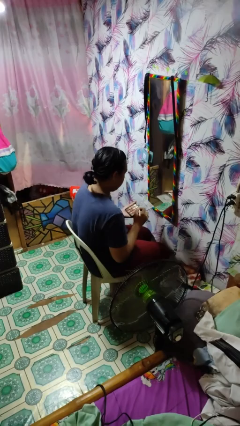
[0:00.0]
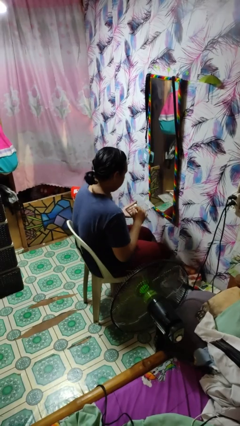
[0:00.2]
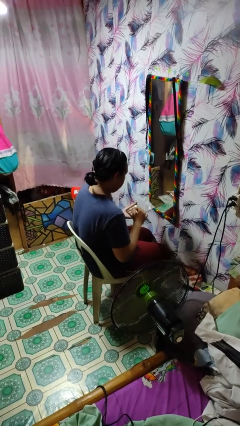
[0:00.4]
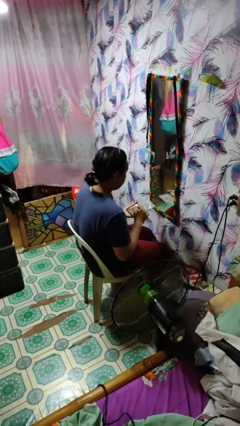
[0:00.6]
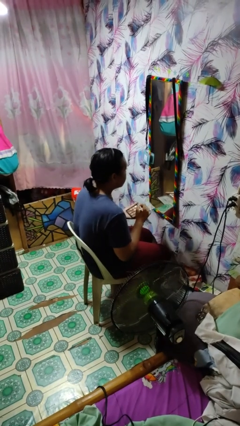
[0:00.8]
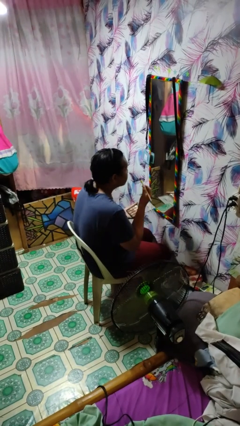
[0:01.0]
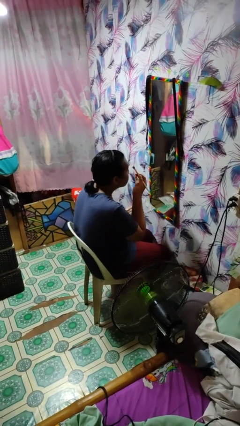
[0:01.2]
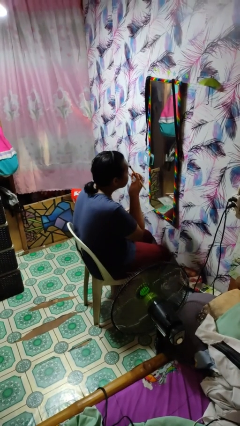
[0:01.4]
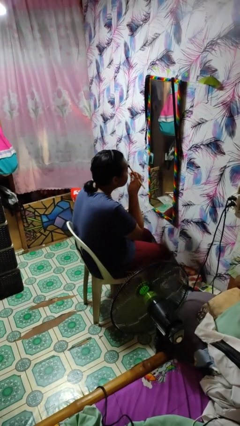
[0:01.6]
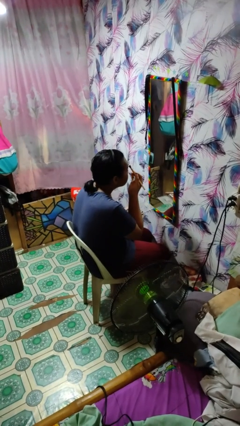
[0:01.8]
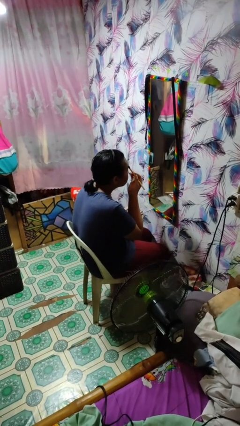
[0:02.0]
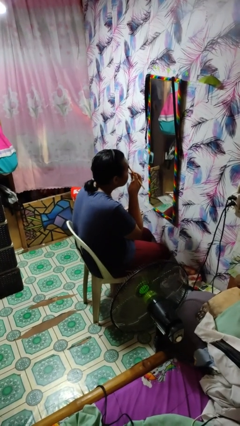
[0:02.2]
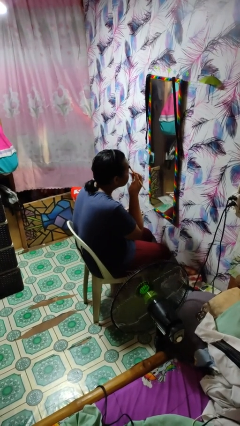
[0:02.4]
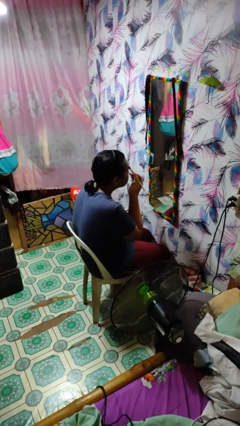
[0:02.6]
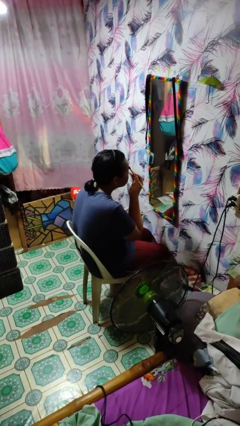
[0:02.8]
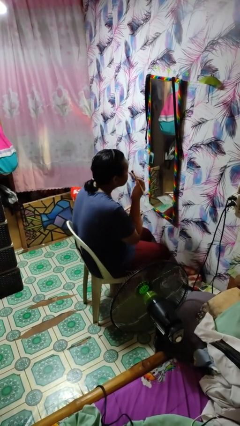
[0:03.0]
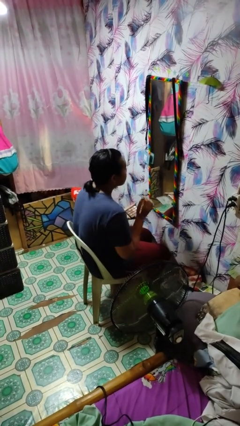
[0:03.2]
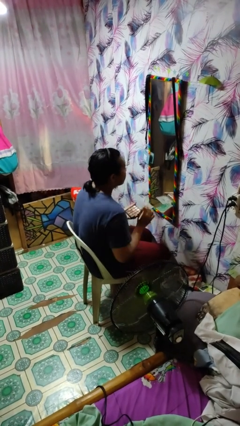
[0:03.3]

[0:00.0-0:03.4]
person applies eye makeup

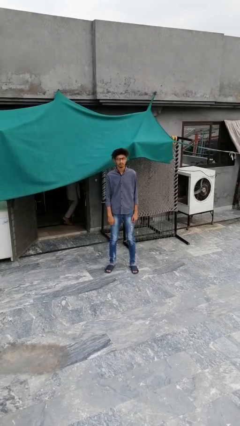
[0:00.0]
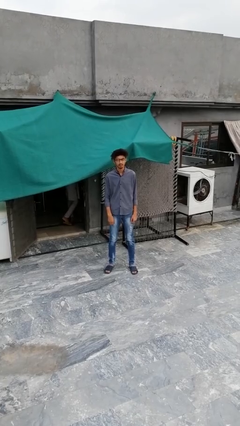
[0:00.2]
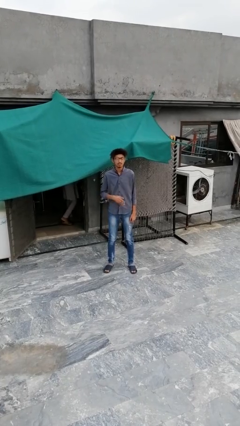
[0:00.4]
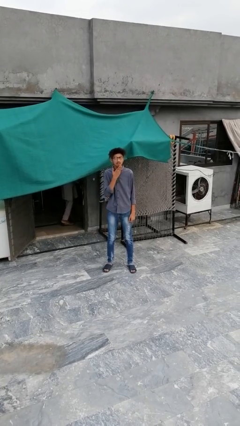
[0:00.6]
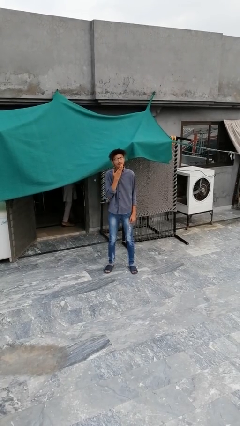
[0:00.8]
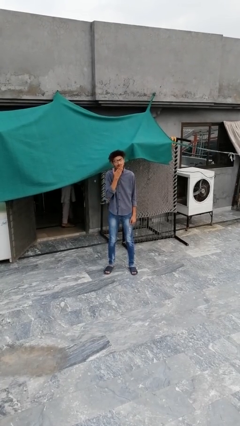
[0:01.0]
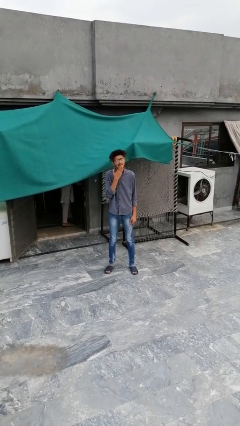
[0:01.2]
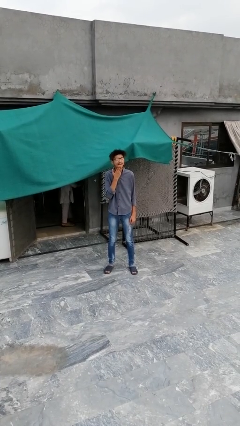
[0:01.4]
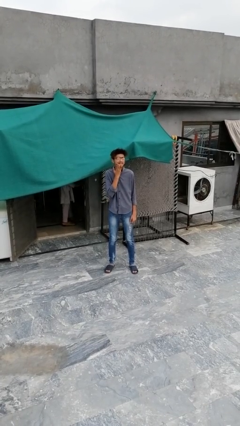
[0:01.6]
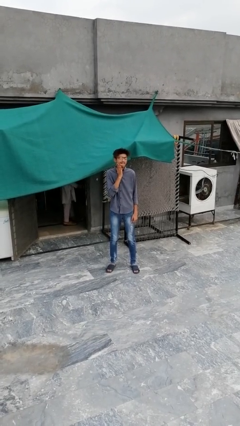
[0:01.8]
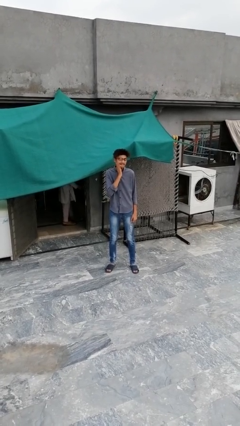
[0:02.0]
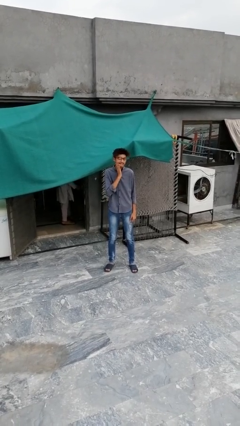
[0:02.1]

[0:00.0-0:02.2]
person strokes chin

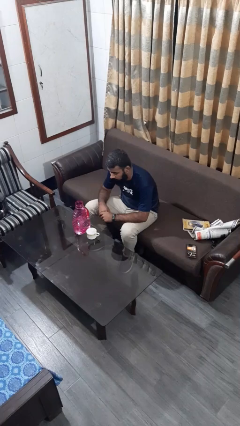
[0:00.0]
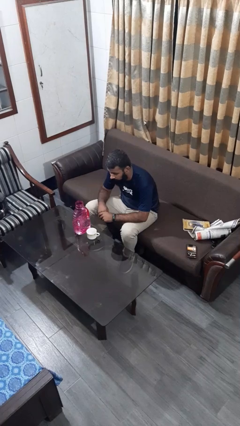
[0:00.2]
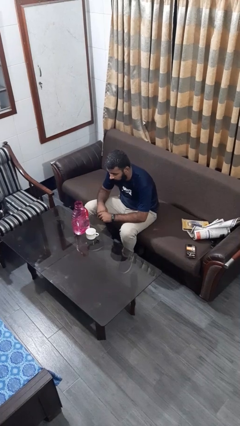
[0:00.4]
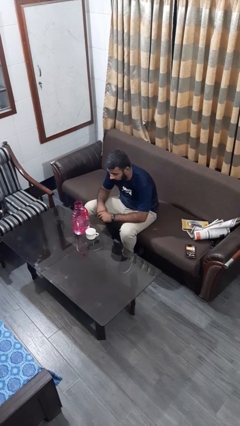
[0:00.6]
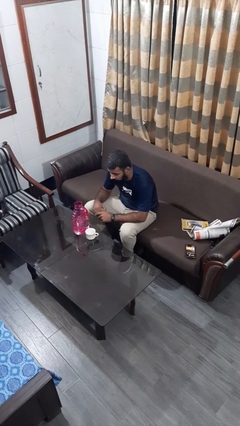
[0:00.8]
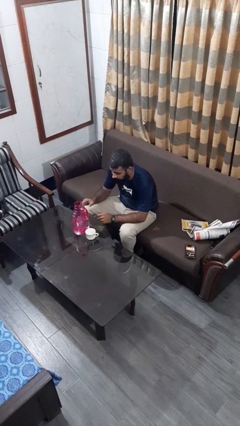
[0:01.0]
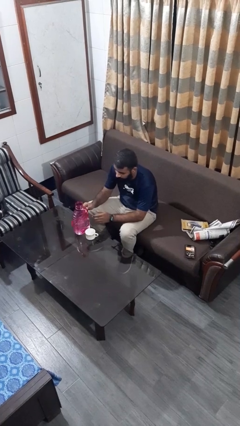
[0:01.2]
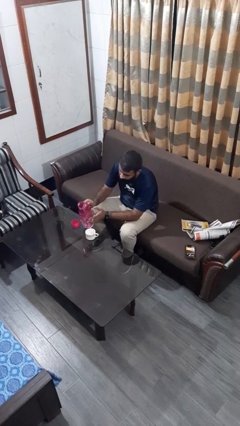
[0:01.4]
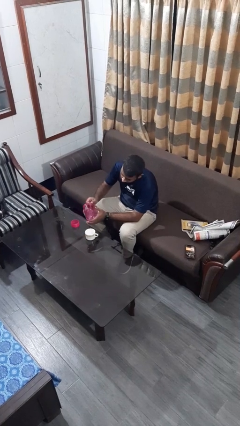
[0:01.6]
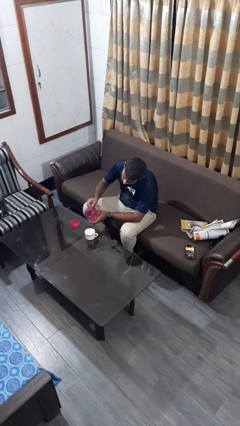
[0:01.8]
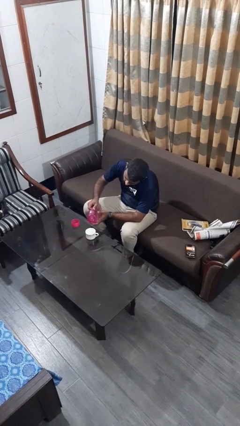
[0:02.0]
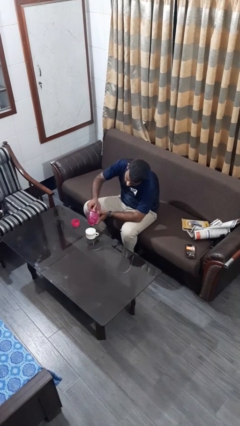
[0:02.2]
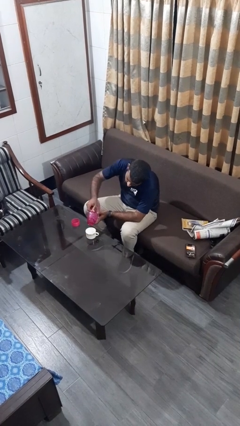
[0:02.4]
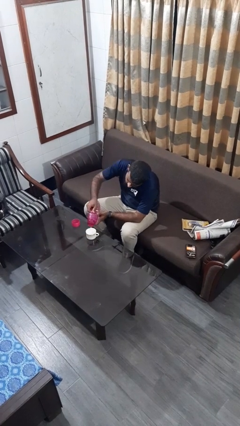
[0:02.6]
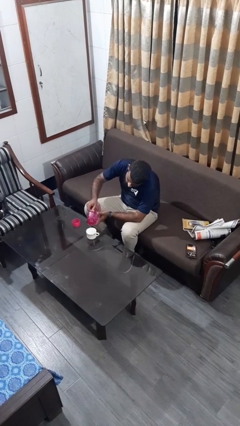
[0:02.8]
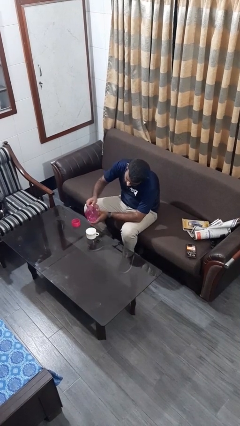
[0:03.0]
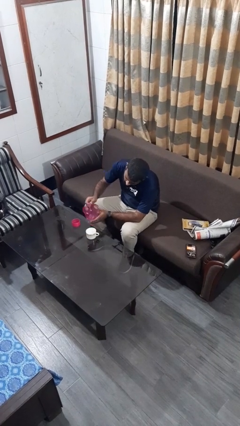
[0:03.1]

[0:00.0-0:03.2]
person pours liquid into cup

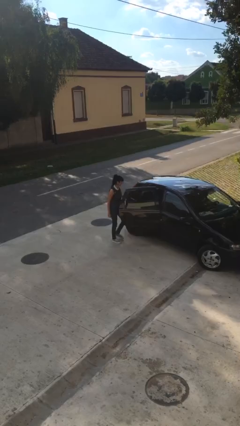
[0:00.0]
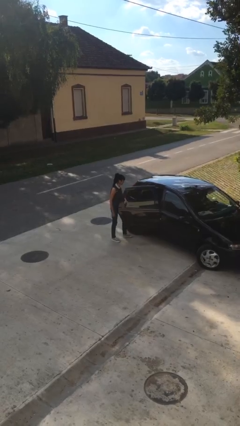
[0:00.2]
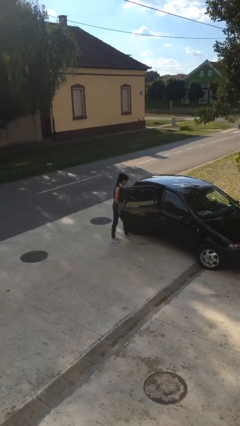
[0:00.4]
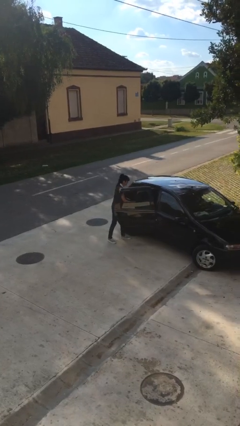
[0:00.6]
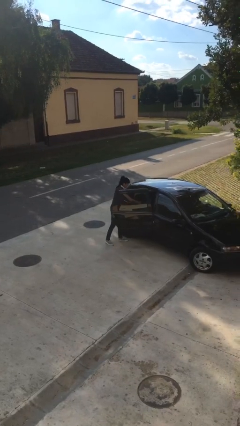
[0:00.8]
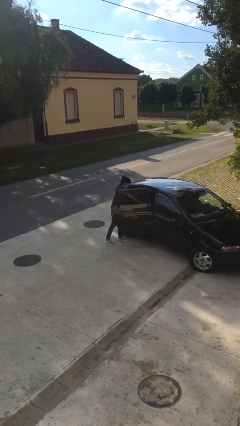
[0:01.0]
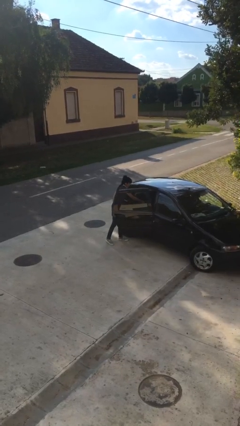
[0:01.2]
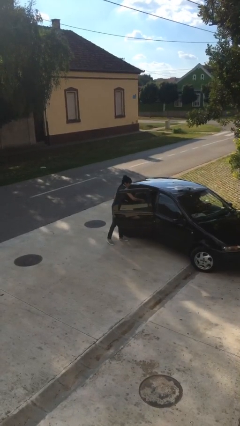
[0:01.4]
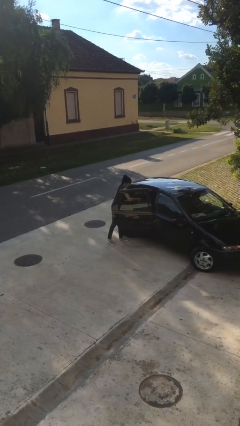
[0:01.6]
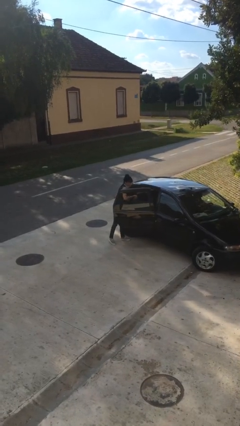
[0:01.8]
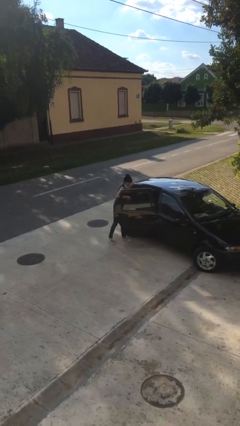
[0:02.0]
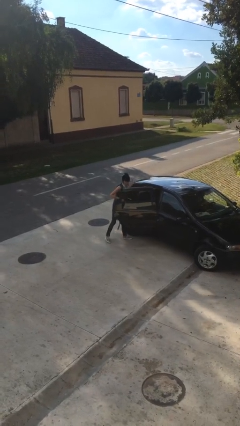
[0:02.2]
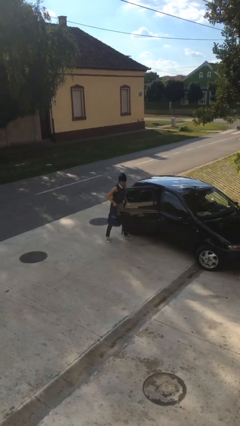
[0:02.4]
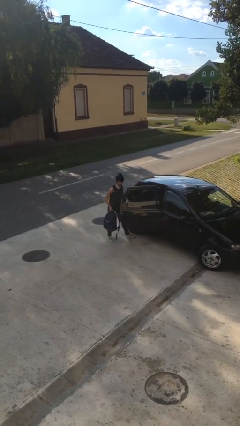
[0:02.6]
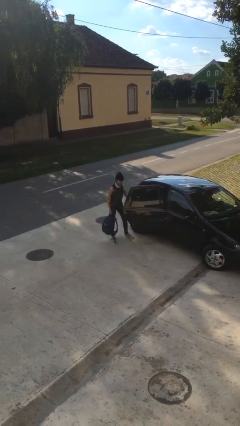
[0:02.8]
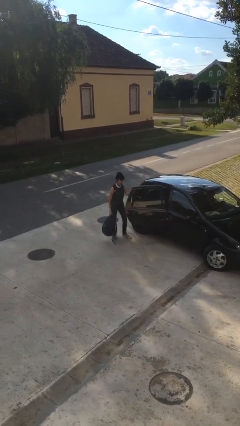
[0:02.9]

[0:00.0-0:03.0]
person unloads car

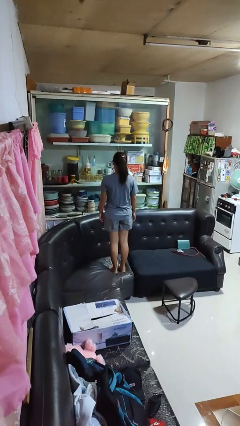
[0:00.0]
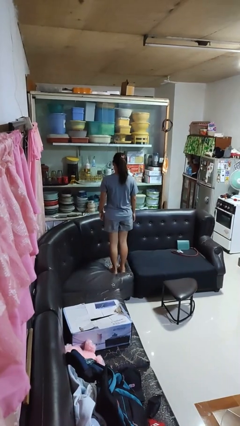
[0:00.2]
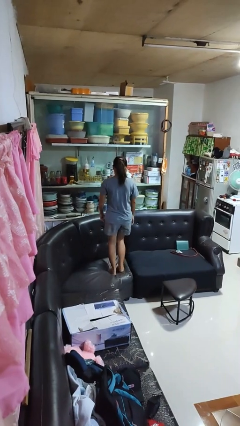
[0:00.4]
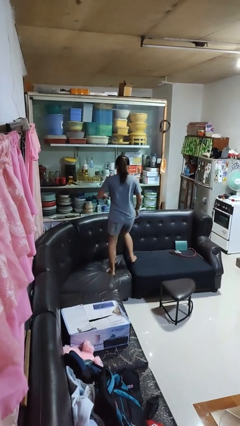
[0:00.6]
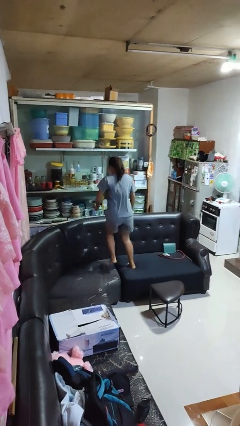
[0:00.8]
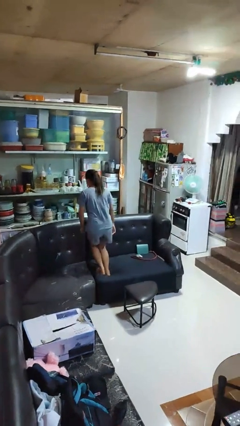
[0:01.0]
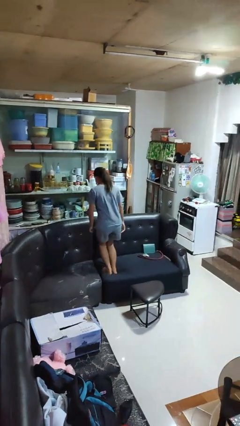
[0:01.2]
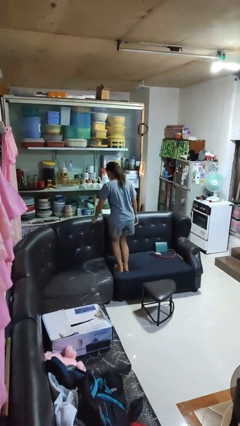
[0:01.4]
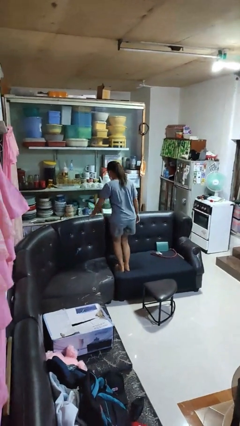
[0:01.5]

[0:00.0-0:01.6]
person jumps on couch

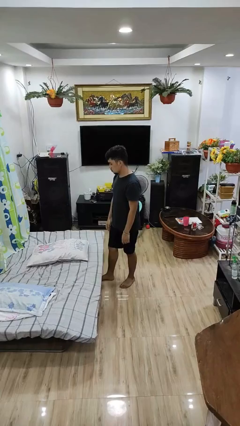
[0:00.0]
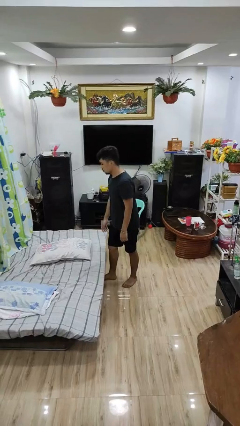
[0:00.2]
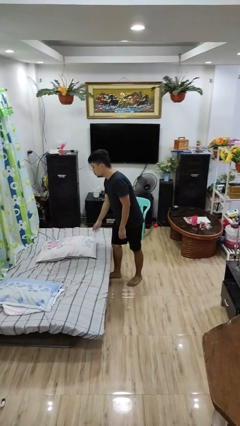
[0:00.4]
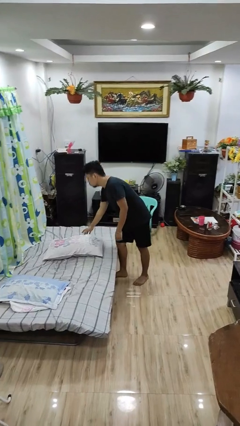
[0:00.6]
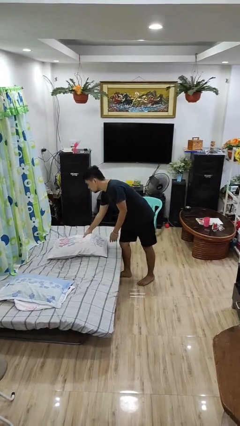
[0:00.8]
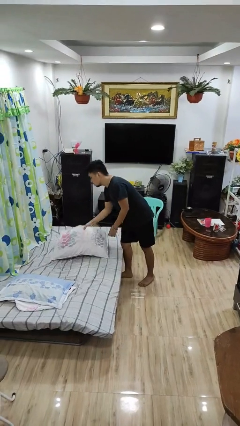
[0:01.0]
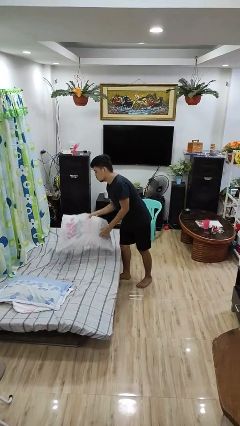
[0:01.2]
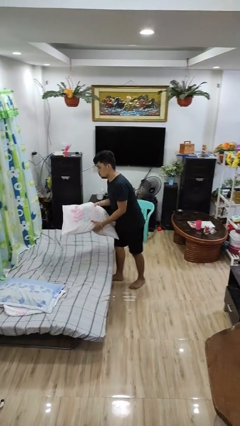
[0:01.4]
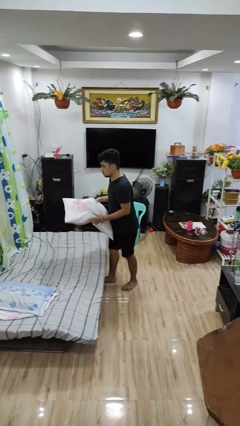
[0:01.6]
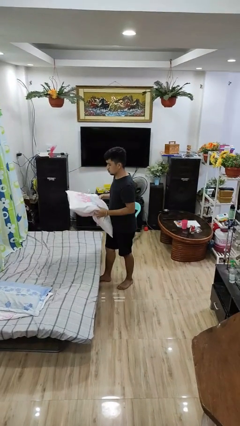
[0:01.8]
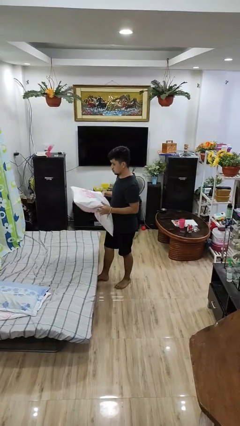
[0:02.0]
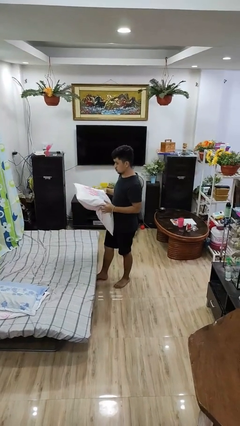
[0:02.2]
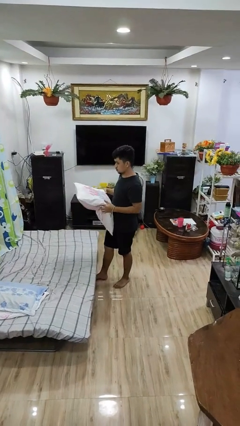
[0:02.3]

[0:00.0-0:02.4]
person picks up object from bed

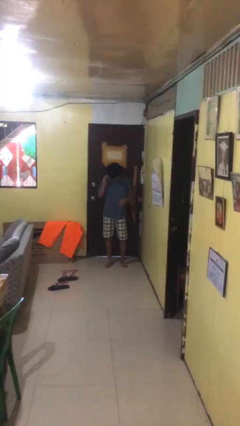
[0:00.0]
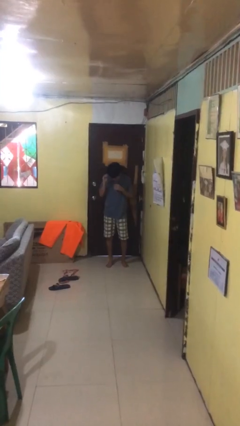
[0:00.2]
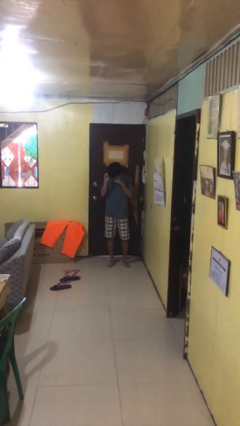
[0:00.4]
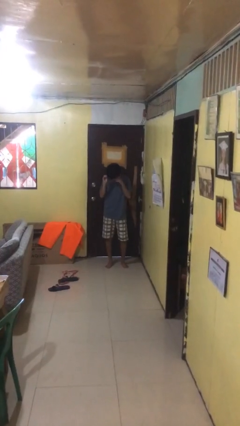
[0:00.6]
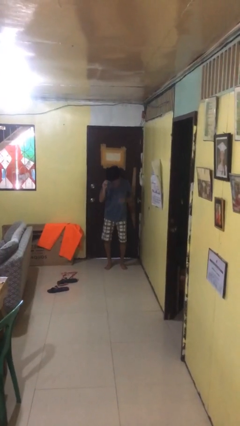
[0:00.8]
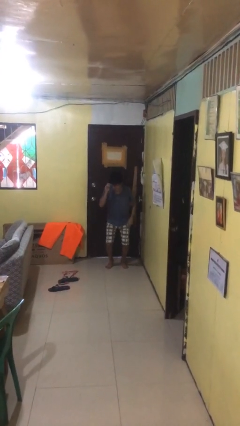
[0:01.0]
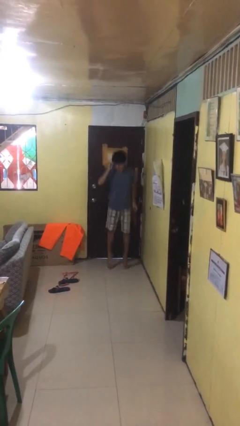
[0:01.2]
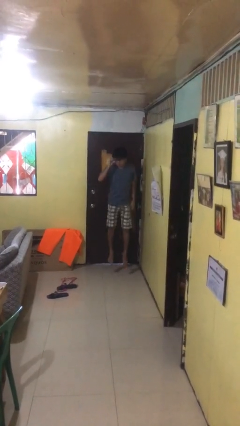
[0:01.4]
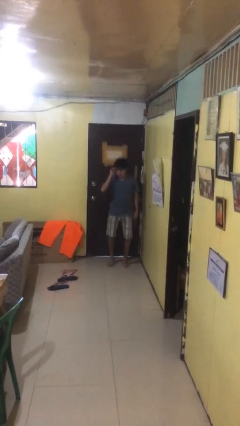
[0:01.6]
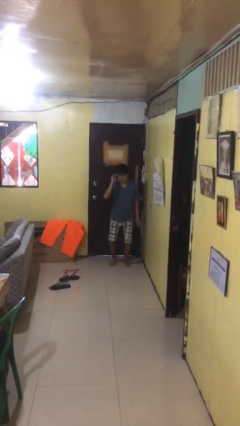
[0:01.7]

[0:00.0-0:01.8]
person jumps
